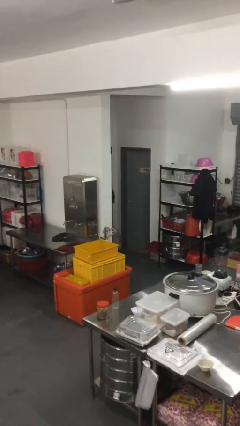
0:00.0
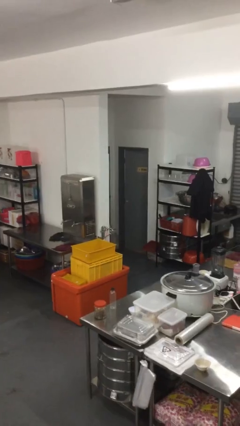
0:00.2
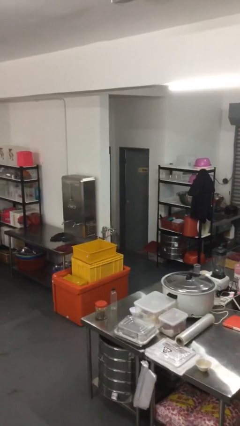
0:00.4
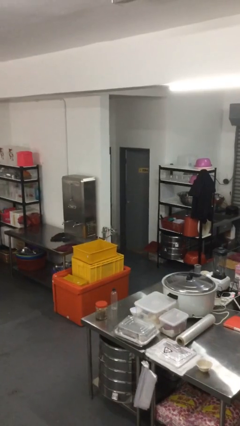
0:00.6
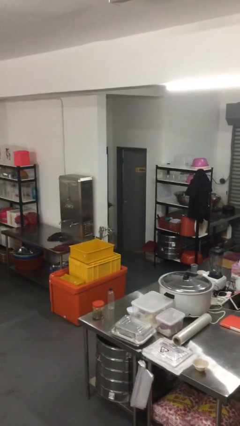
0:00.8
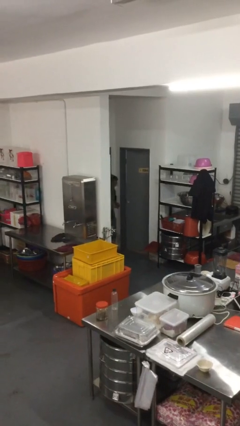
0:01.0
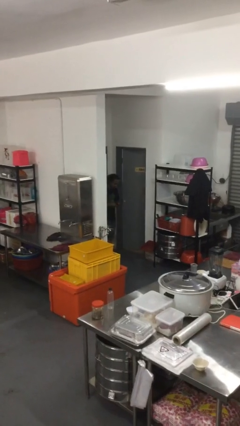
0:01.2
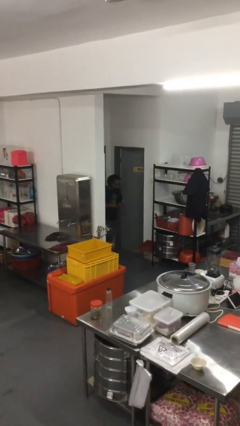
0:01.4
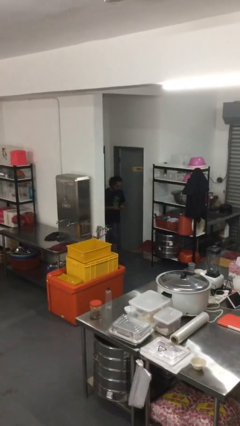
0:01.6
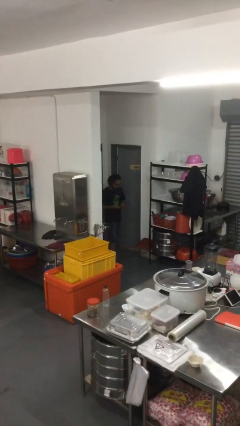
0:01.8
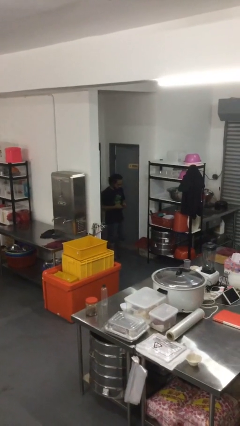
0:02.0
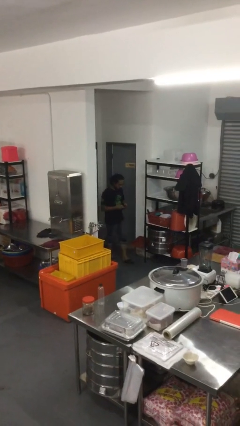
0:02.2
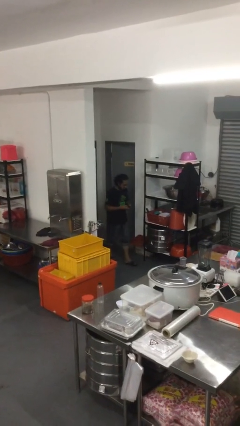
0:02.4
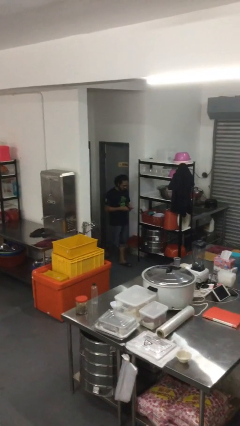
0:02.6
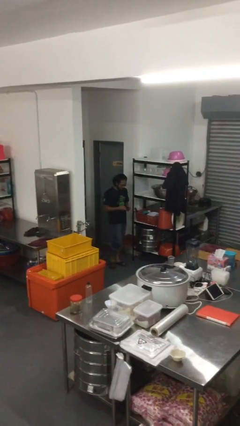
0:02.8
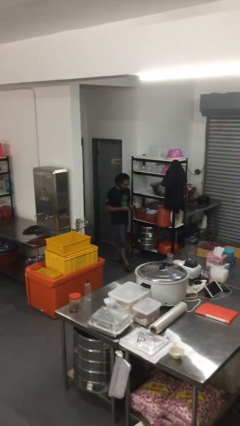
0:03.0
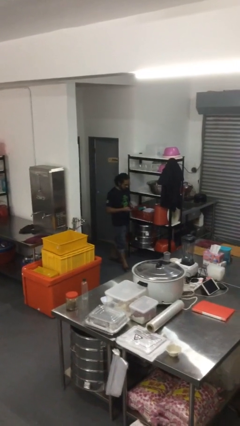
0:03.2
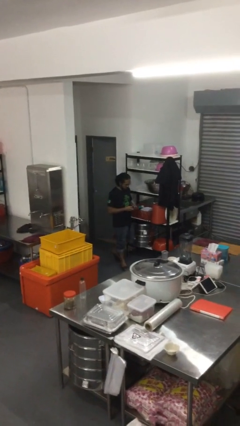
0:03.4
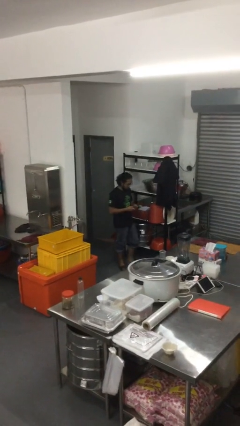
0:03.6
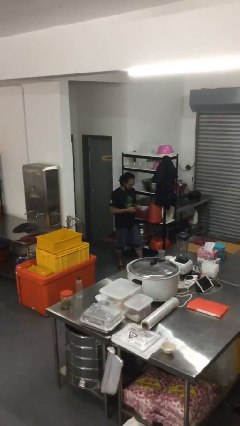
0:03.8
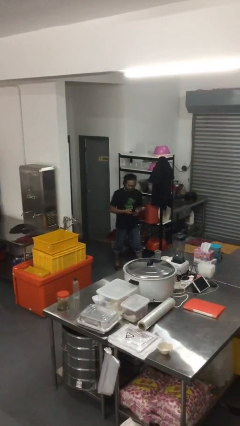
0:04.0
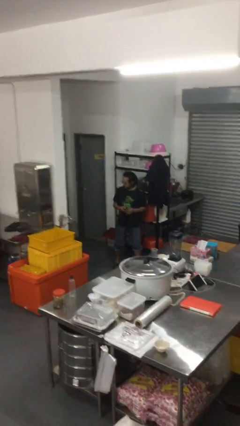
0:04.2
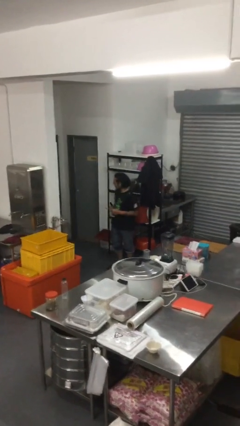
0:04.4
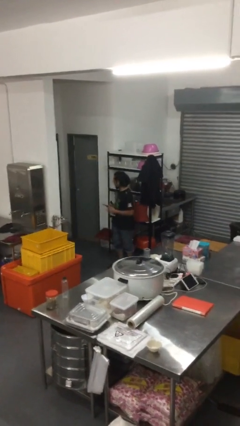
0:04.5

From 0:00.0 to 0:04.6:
person enters scene through structure

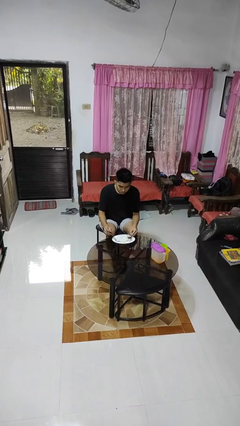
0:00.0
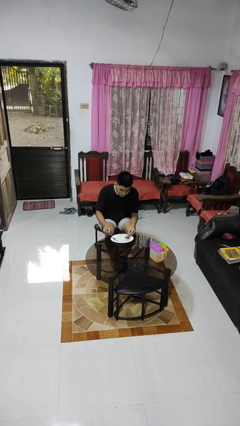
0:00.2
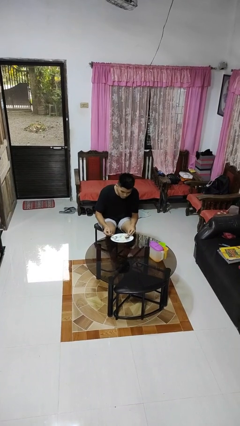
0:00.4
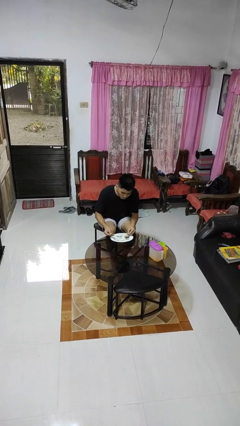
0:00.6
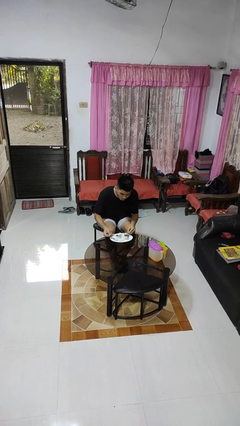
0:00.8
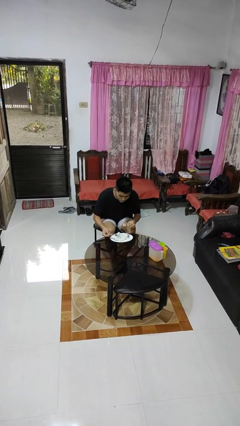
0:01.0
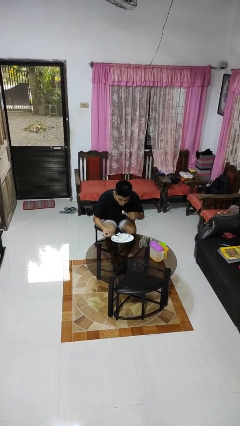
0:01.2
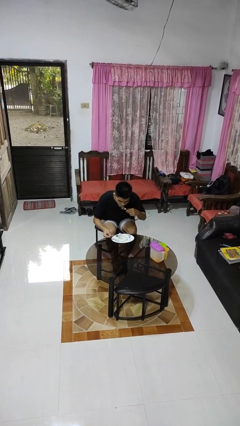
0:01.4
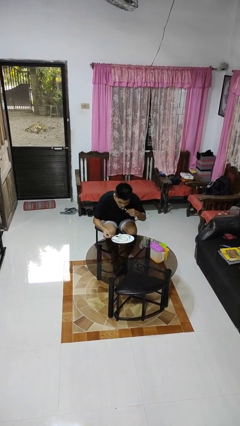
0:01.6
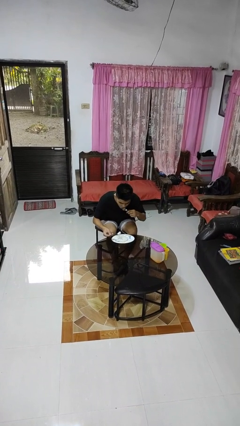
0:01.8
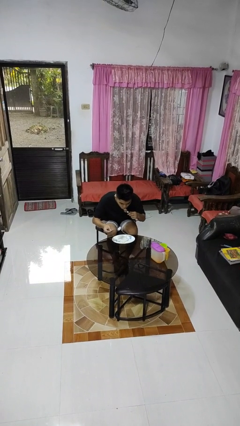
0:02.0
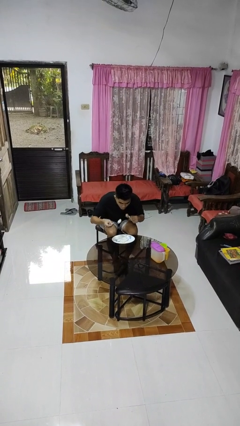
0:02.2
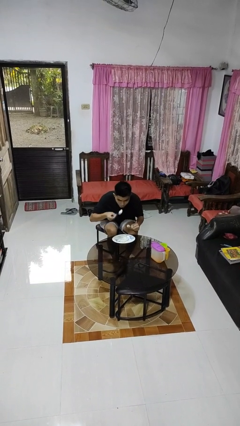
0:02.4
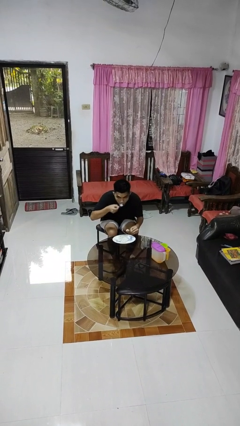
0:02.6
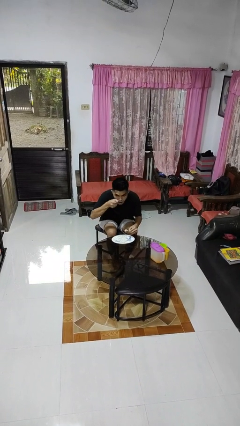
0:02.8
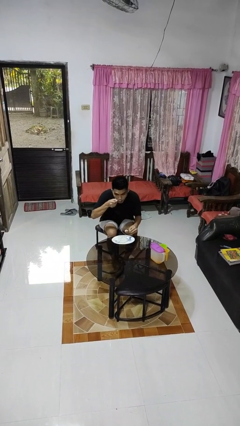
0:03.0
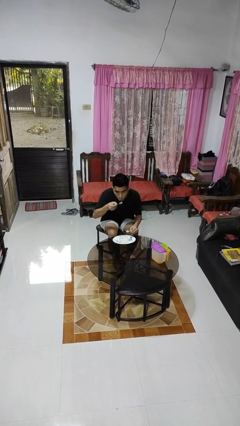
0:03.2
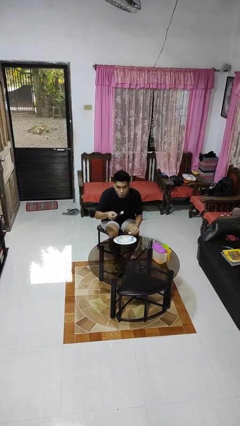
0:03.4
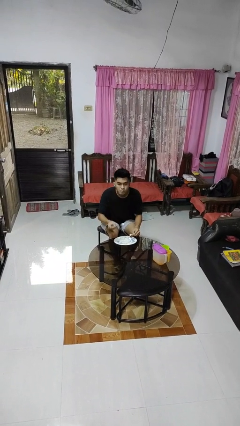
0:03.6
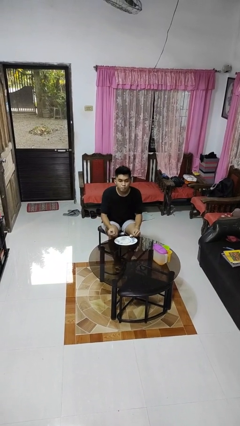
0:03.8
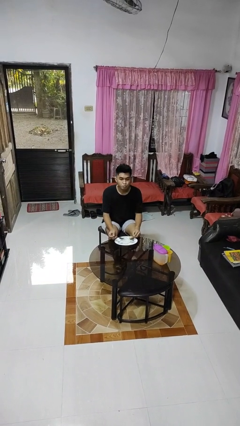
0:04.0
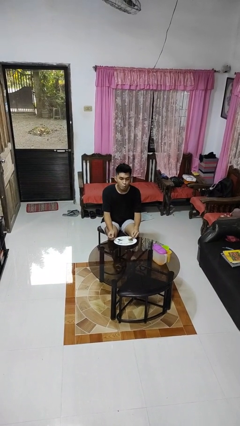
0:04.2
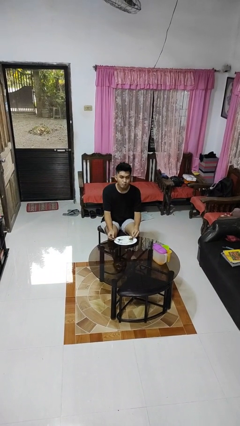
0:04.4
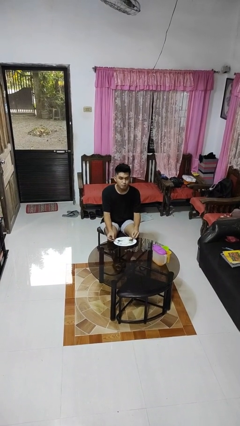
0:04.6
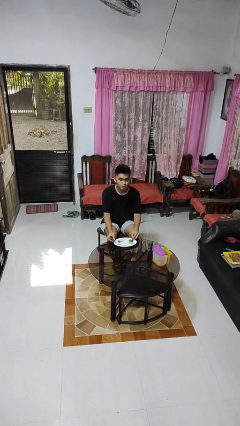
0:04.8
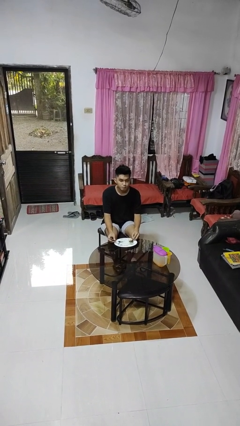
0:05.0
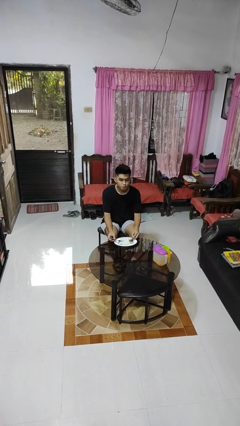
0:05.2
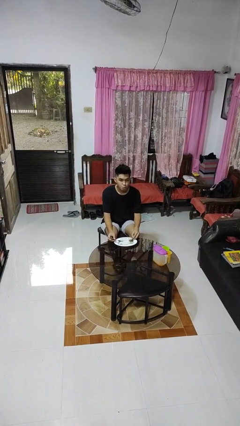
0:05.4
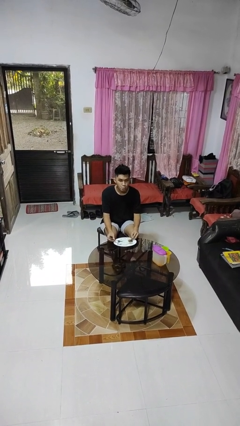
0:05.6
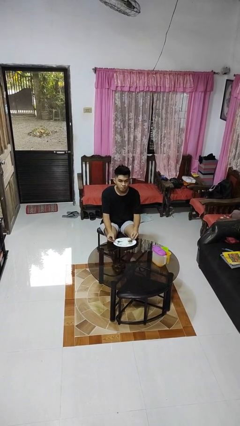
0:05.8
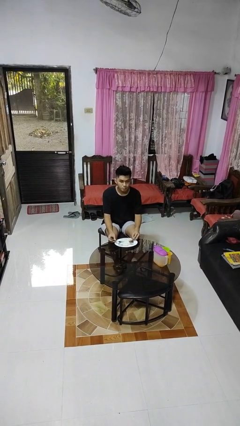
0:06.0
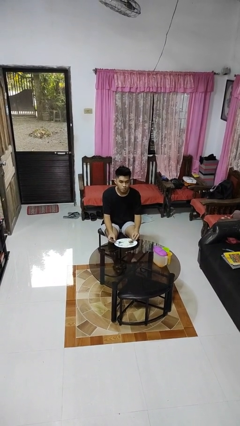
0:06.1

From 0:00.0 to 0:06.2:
person eats with utensil

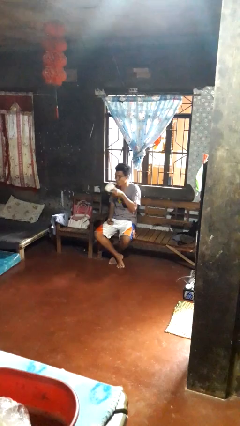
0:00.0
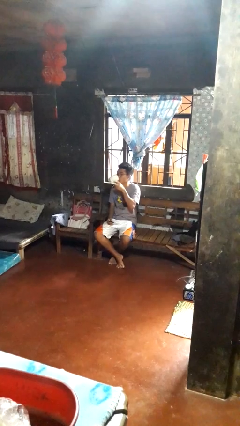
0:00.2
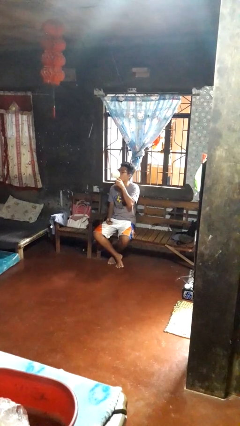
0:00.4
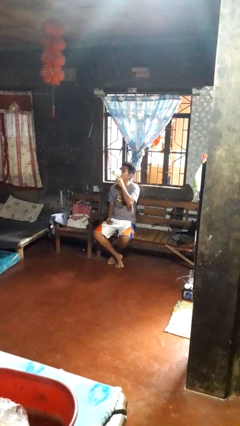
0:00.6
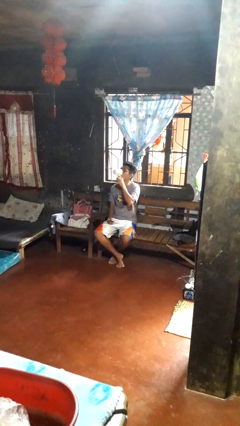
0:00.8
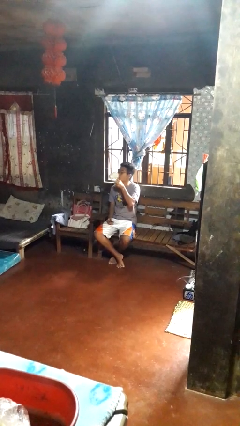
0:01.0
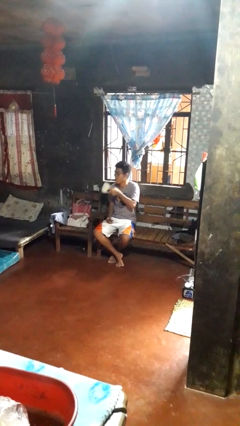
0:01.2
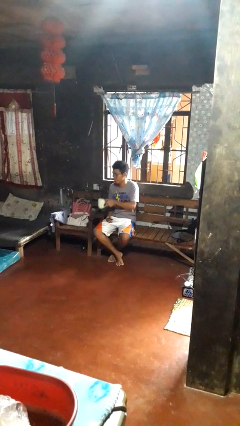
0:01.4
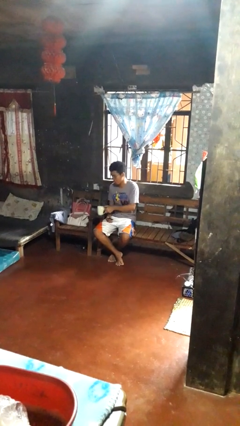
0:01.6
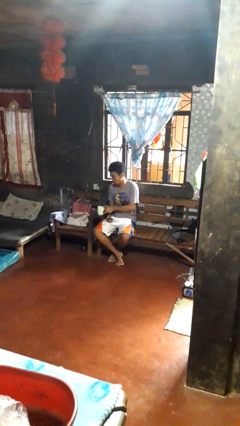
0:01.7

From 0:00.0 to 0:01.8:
person drinks from cup

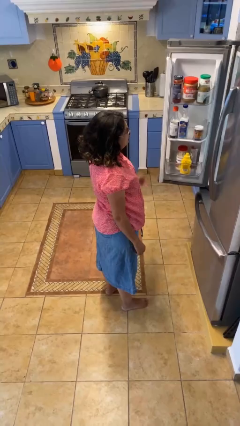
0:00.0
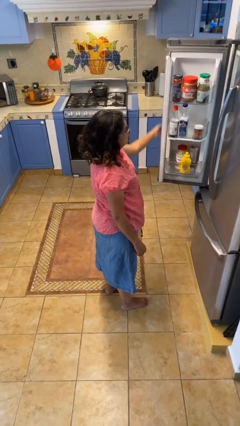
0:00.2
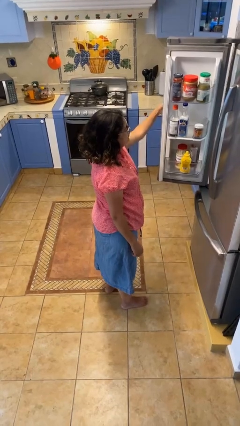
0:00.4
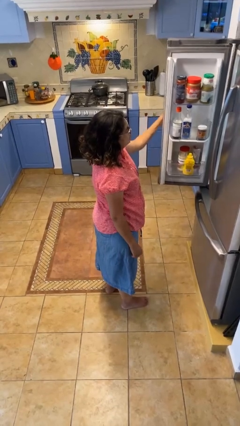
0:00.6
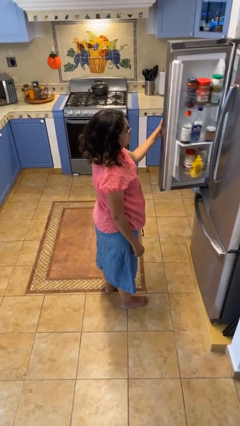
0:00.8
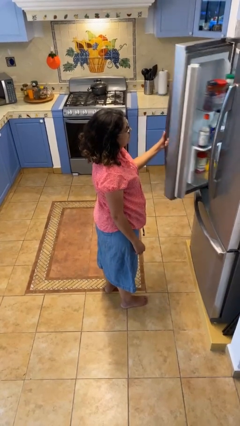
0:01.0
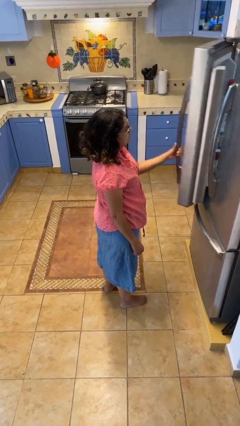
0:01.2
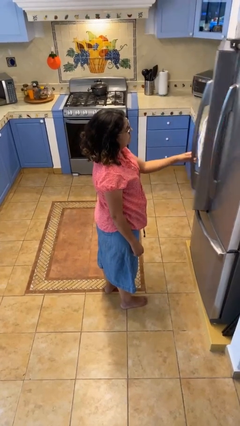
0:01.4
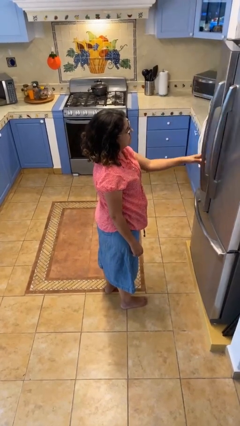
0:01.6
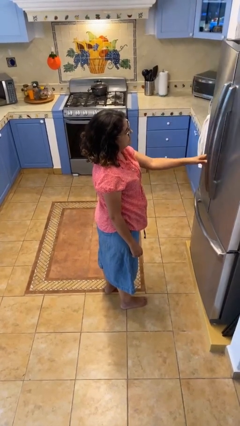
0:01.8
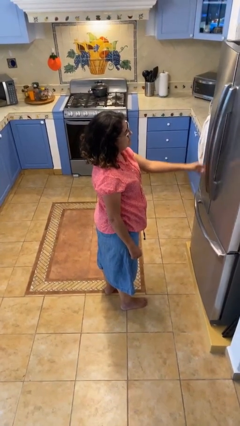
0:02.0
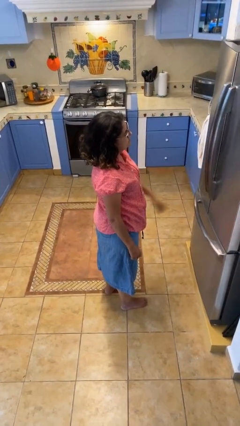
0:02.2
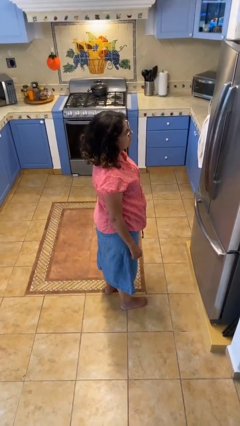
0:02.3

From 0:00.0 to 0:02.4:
person closes refrigerator

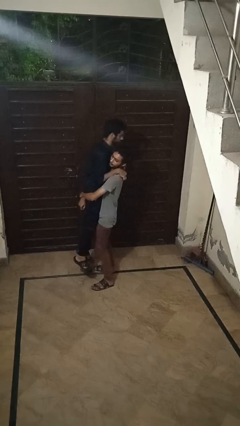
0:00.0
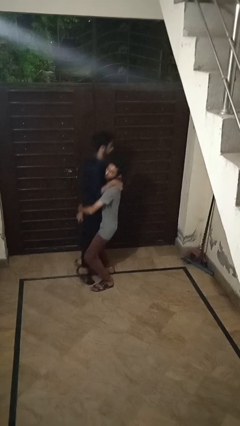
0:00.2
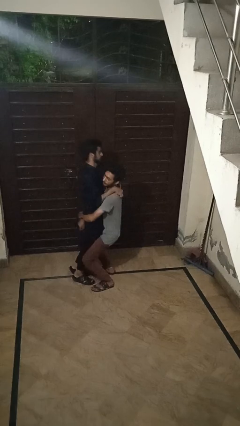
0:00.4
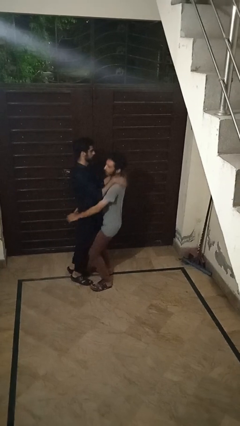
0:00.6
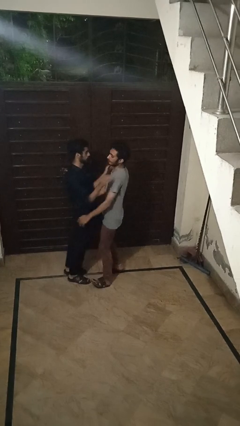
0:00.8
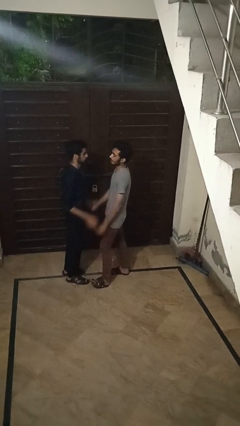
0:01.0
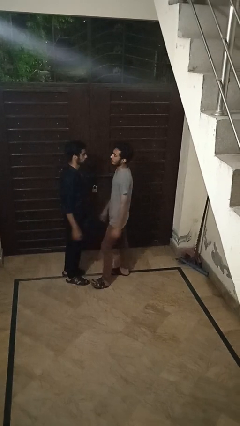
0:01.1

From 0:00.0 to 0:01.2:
person puts down person

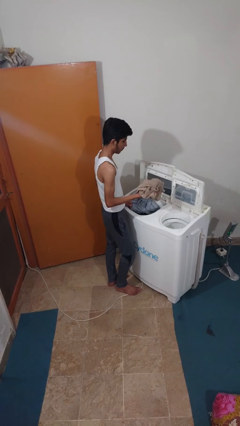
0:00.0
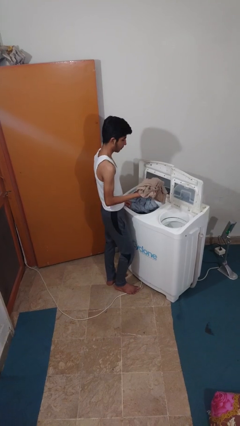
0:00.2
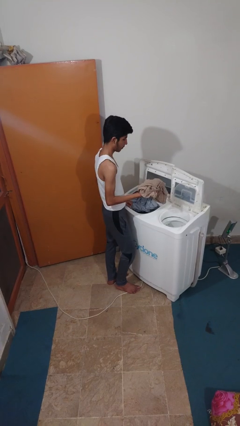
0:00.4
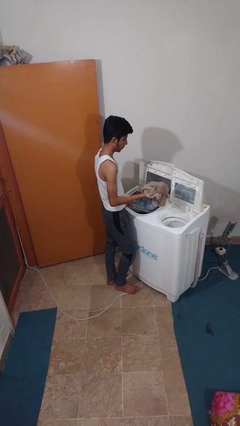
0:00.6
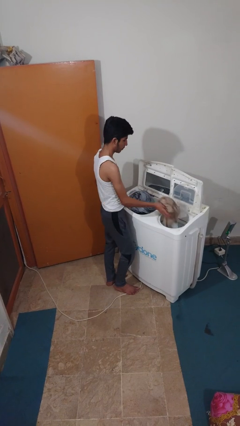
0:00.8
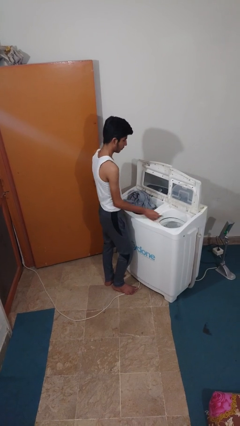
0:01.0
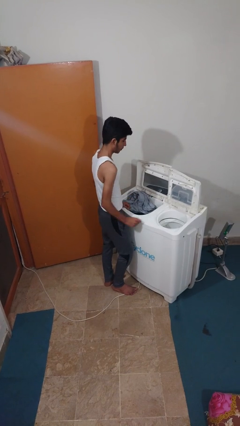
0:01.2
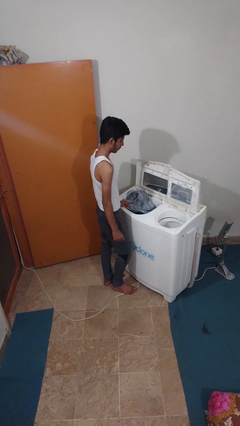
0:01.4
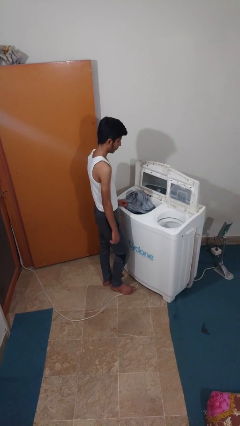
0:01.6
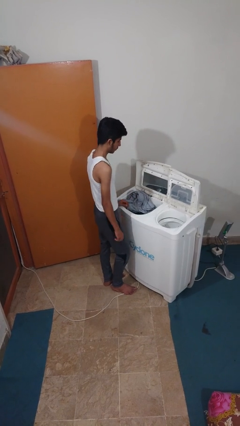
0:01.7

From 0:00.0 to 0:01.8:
person loads dryer
